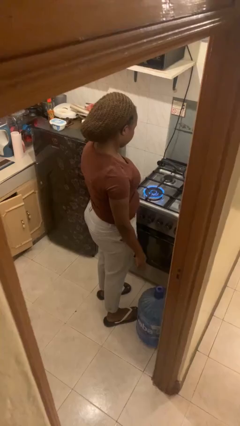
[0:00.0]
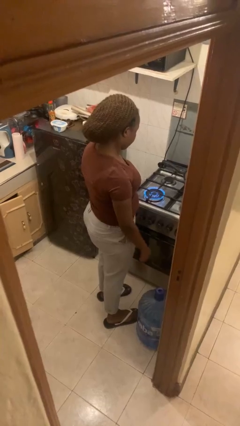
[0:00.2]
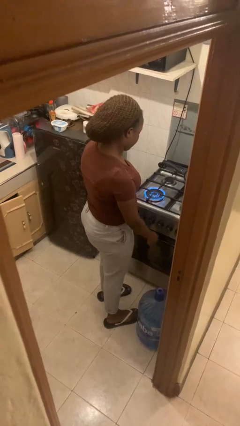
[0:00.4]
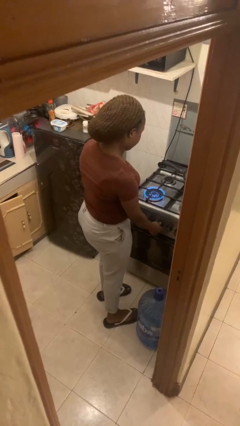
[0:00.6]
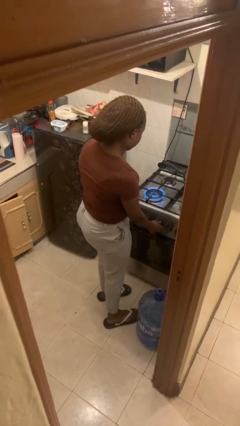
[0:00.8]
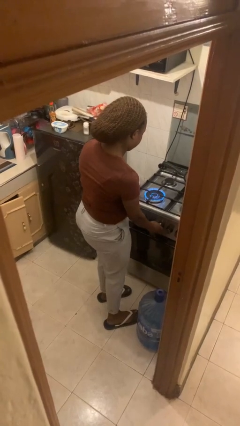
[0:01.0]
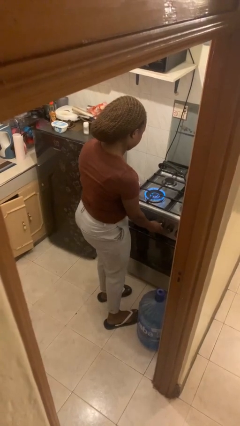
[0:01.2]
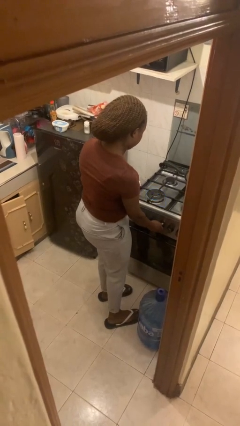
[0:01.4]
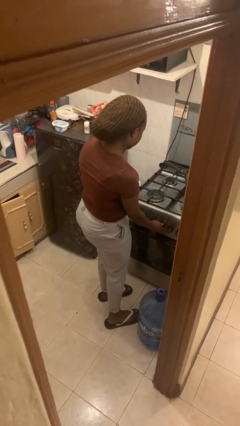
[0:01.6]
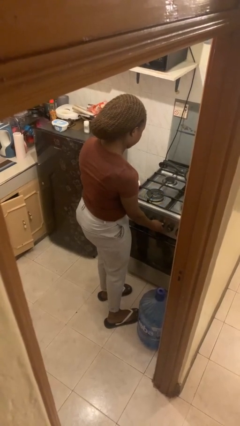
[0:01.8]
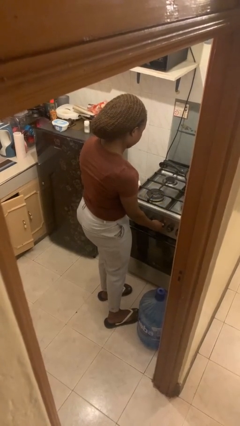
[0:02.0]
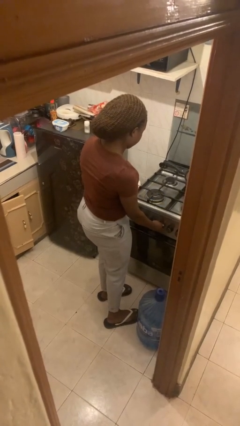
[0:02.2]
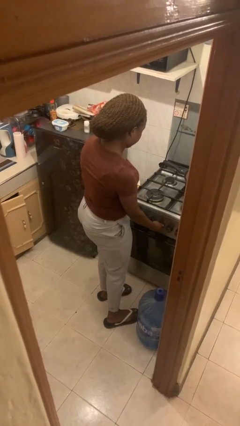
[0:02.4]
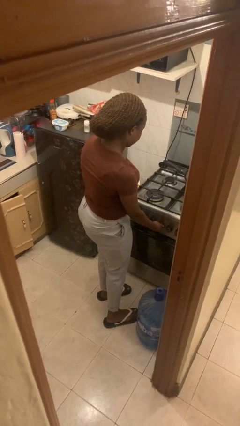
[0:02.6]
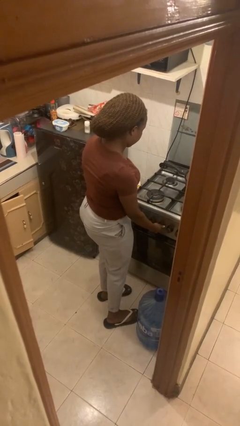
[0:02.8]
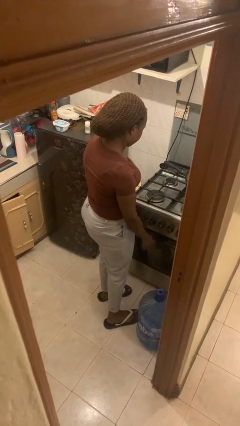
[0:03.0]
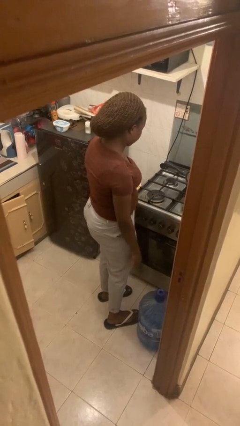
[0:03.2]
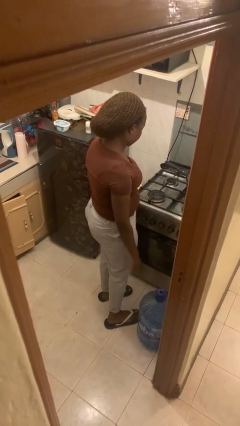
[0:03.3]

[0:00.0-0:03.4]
person turns off stovetop

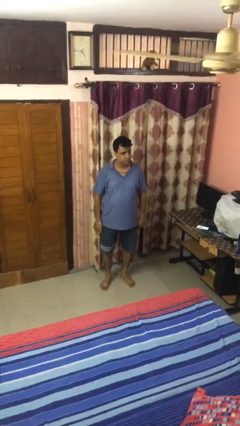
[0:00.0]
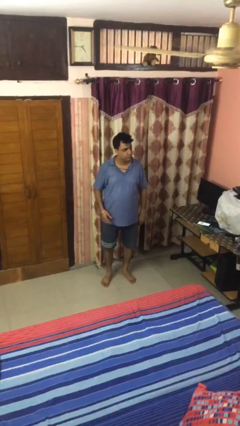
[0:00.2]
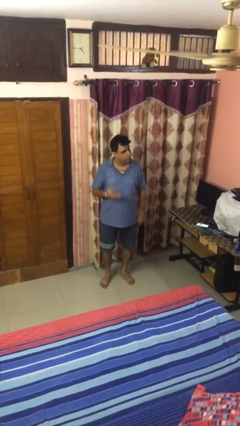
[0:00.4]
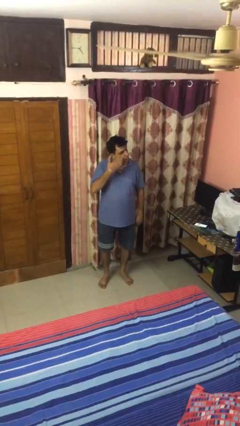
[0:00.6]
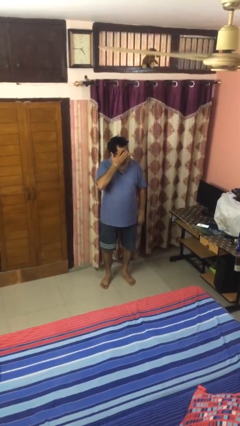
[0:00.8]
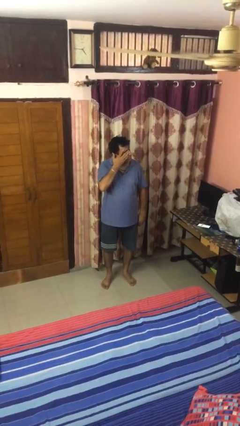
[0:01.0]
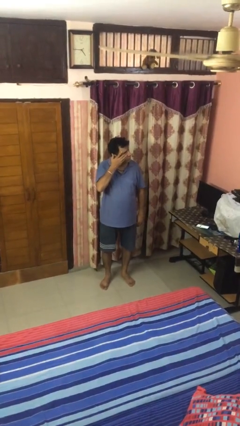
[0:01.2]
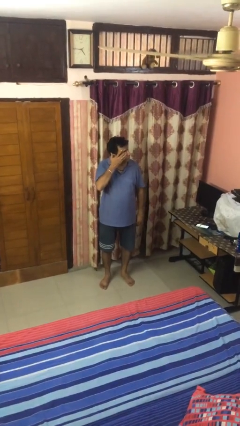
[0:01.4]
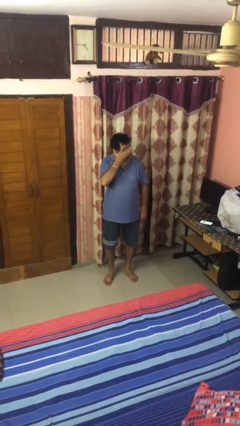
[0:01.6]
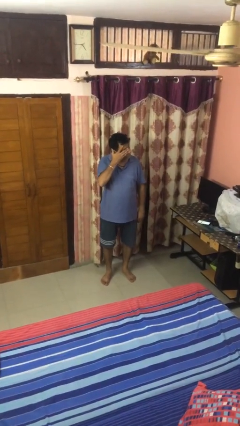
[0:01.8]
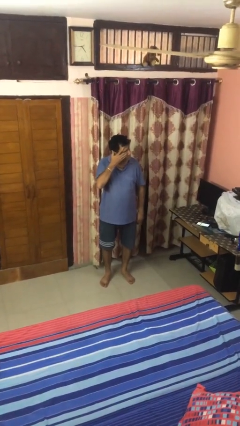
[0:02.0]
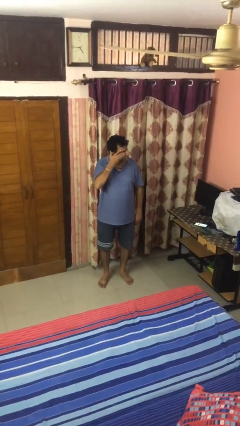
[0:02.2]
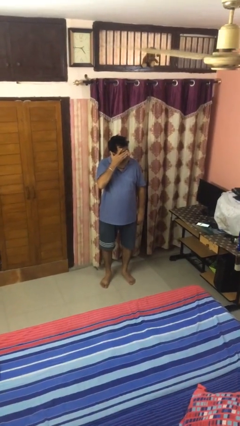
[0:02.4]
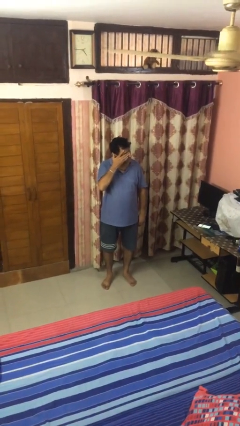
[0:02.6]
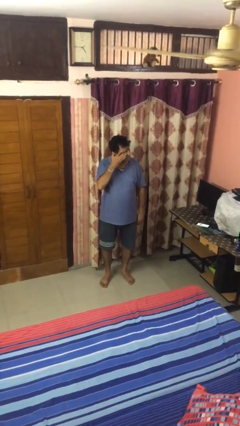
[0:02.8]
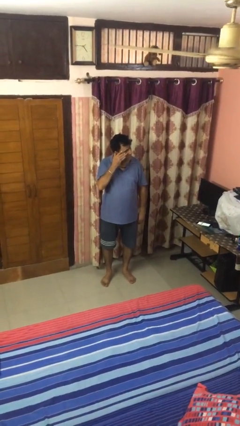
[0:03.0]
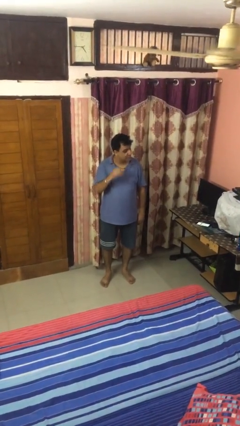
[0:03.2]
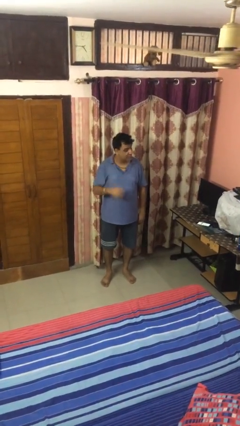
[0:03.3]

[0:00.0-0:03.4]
person rubs eyes

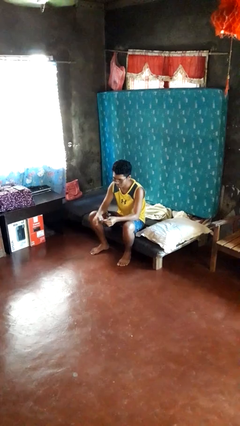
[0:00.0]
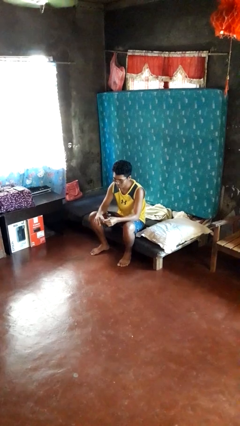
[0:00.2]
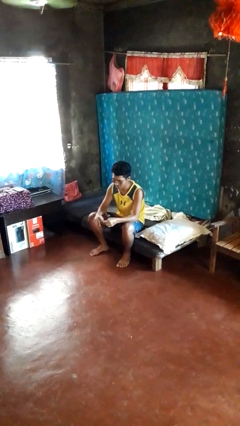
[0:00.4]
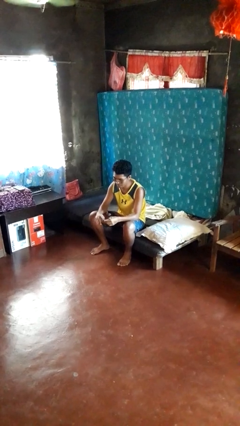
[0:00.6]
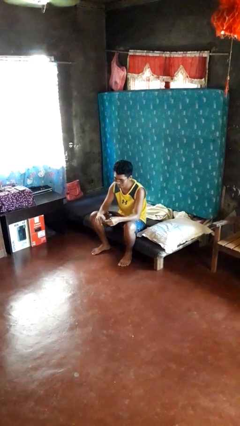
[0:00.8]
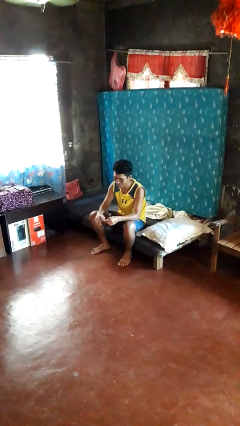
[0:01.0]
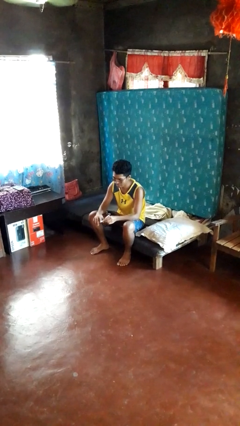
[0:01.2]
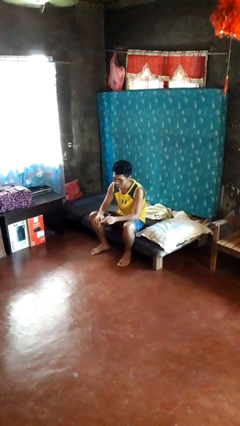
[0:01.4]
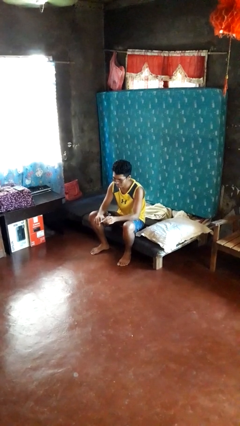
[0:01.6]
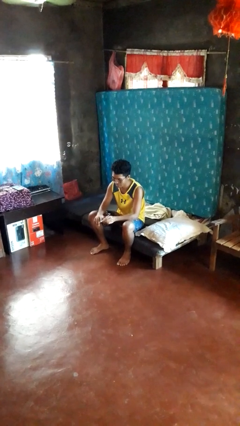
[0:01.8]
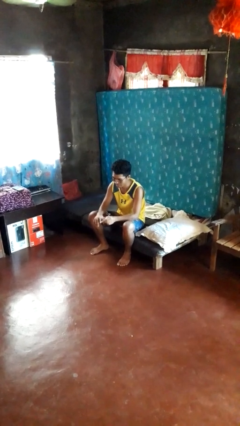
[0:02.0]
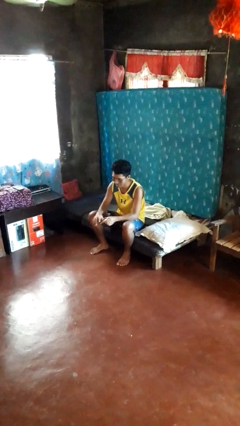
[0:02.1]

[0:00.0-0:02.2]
person files fingernails

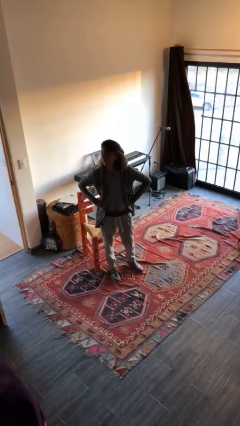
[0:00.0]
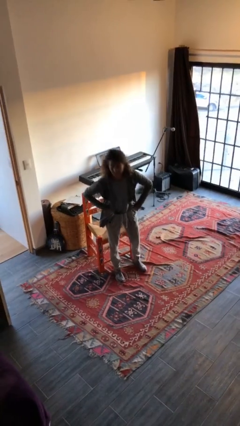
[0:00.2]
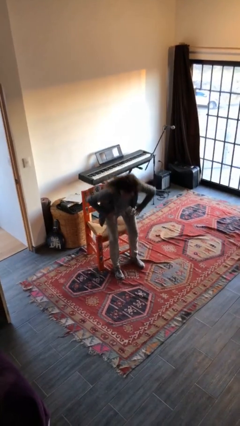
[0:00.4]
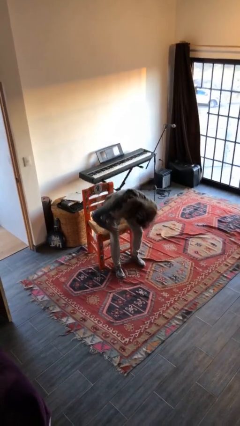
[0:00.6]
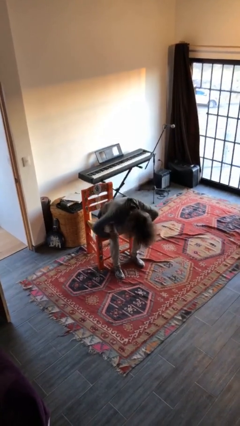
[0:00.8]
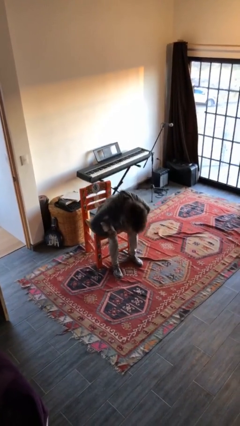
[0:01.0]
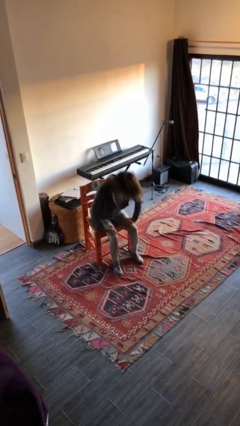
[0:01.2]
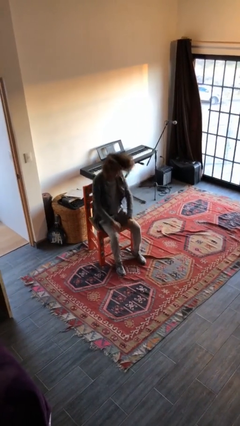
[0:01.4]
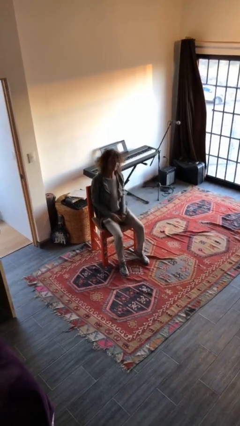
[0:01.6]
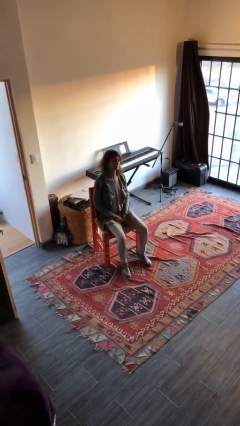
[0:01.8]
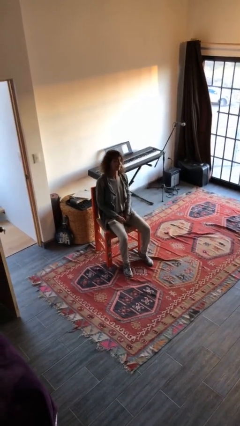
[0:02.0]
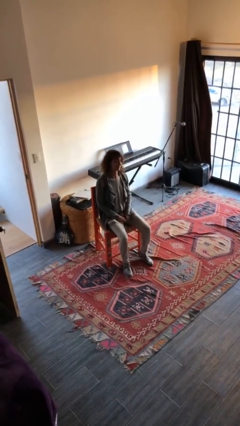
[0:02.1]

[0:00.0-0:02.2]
person sits down

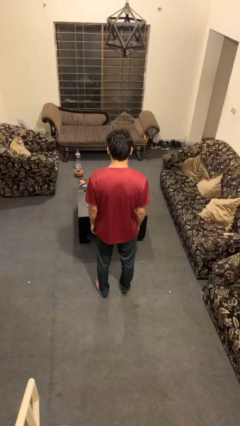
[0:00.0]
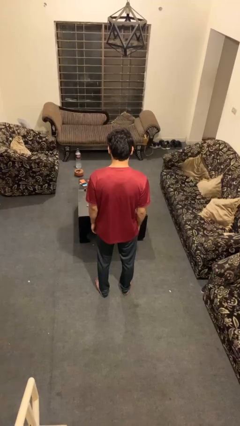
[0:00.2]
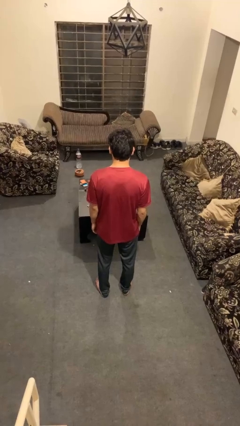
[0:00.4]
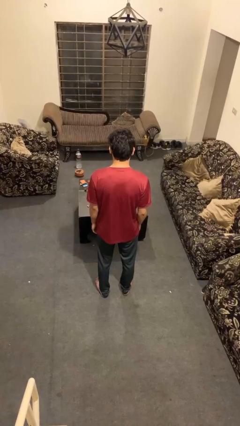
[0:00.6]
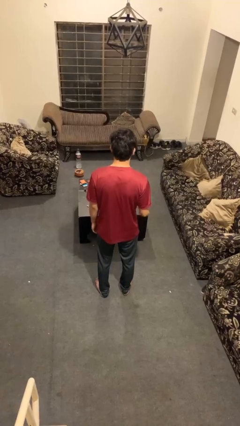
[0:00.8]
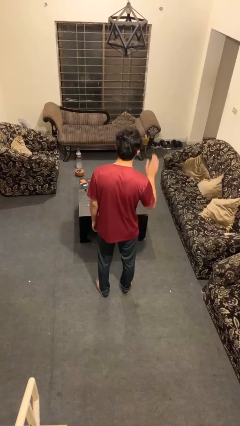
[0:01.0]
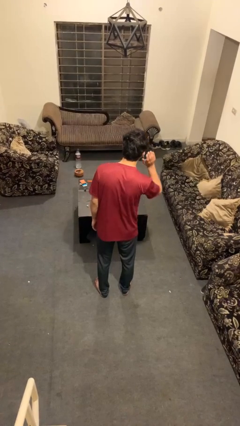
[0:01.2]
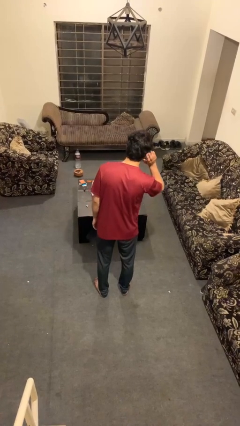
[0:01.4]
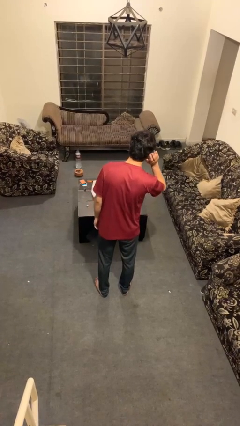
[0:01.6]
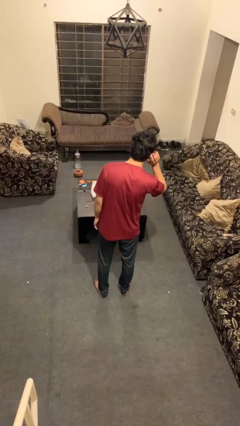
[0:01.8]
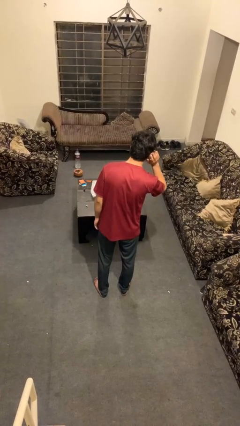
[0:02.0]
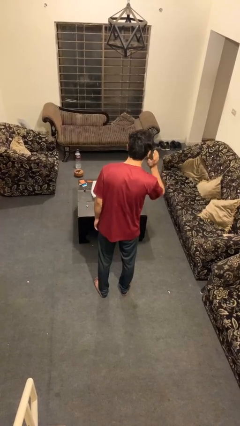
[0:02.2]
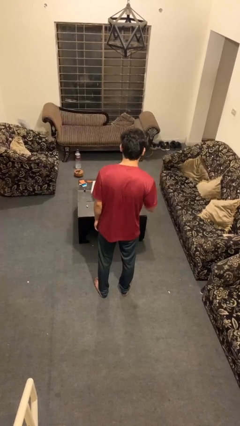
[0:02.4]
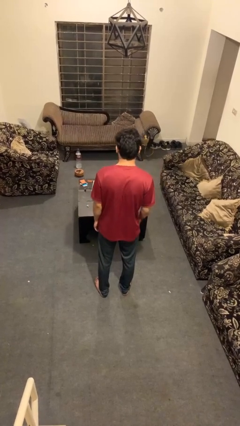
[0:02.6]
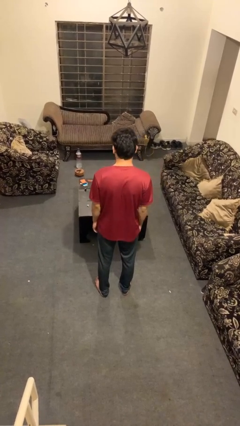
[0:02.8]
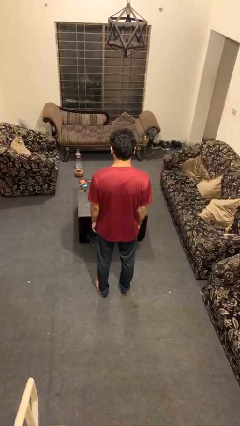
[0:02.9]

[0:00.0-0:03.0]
person gestures listen closely

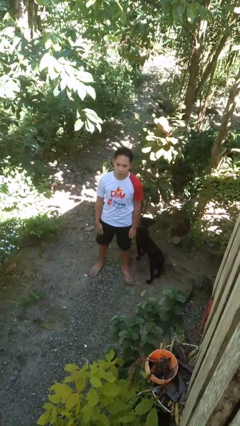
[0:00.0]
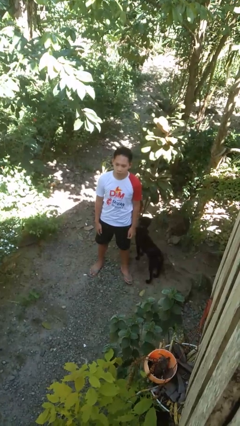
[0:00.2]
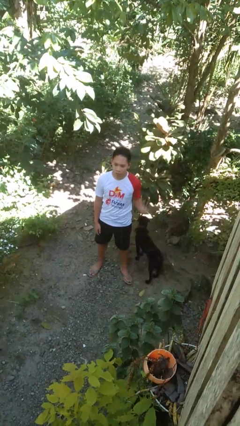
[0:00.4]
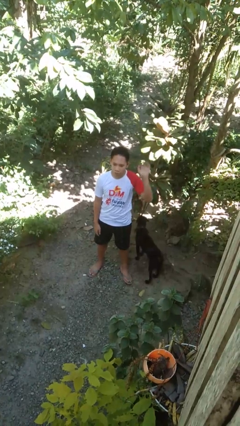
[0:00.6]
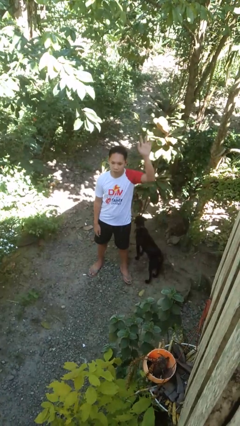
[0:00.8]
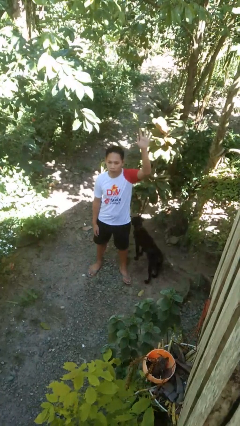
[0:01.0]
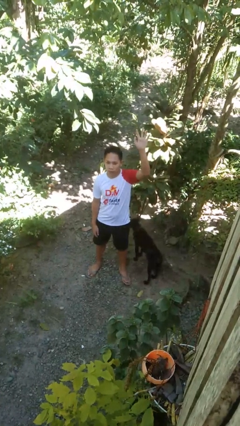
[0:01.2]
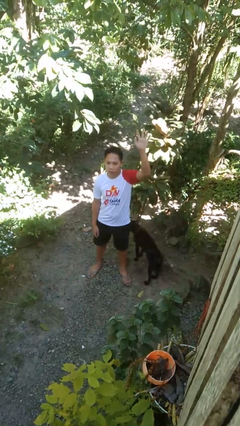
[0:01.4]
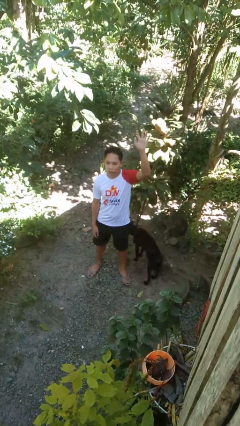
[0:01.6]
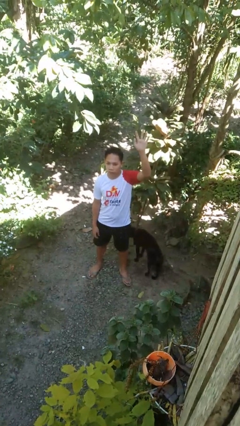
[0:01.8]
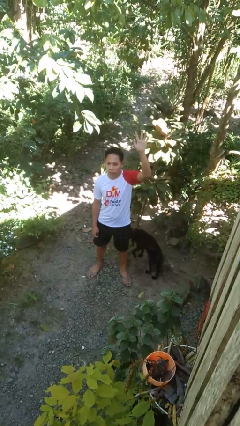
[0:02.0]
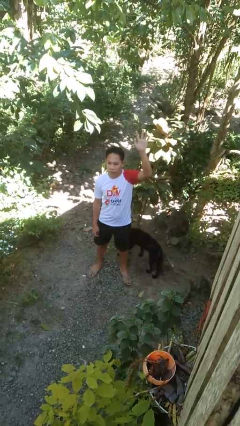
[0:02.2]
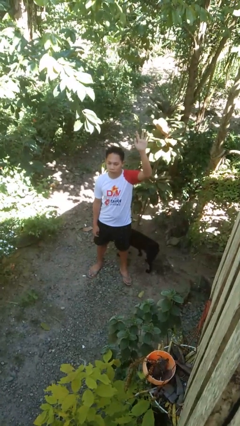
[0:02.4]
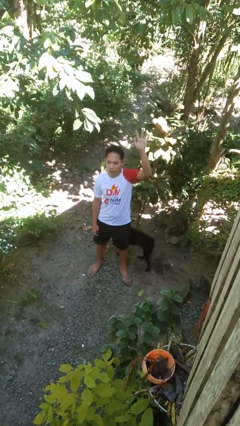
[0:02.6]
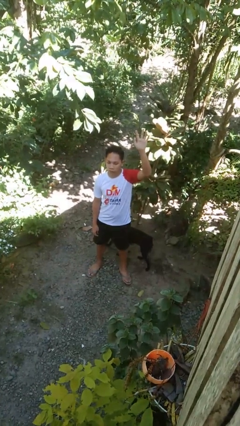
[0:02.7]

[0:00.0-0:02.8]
person gestures raise hand

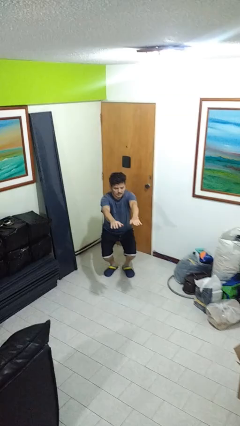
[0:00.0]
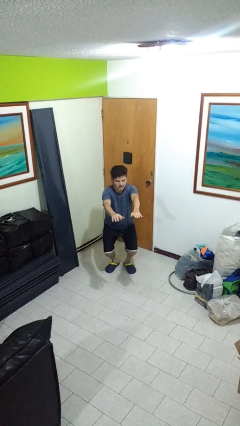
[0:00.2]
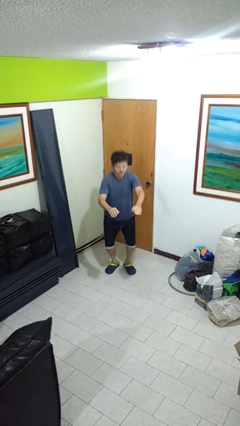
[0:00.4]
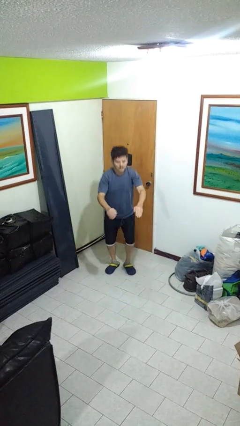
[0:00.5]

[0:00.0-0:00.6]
person stands up
